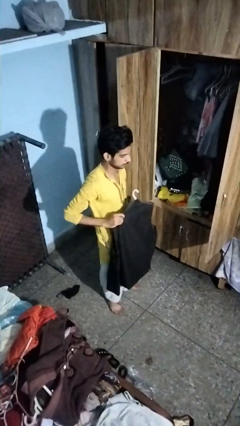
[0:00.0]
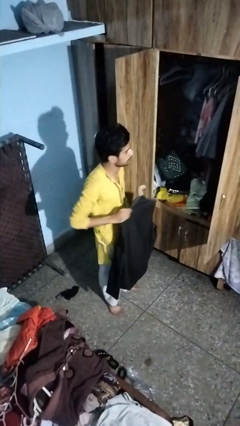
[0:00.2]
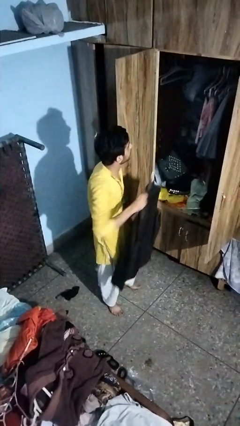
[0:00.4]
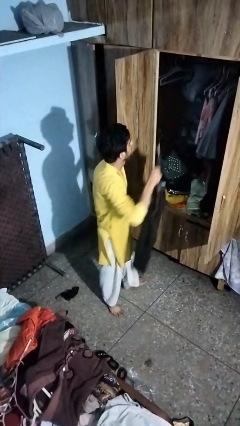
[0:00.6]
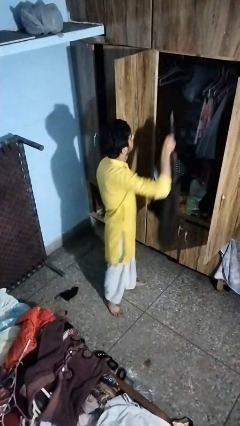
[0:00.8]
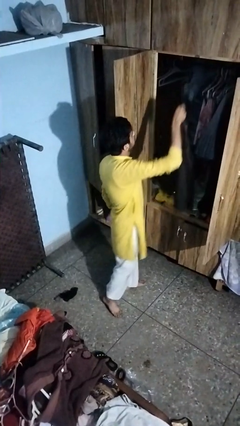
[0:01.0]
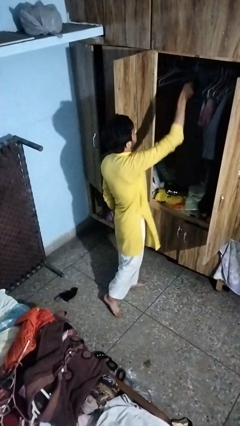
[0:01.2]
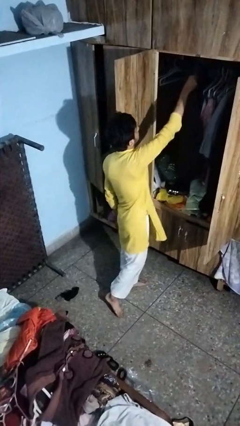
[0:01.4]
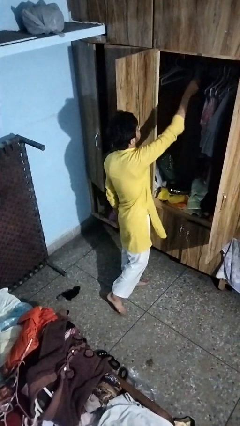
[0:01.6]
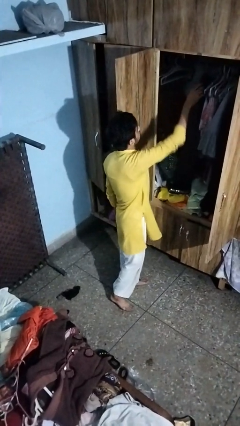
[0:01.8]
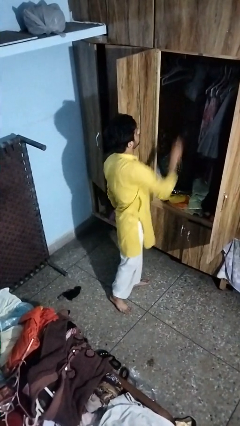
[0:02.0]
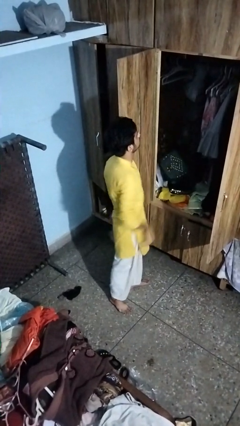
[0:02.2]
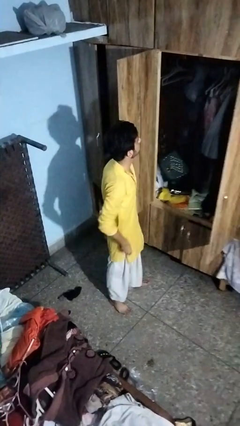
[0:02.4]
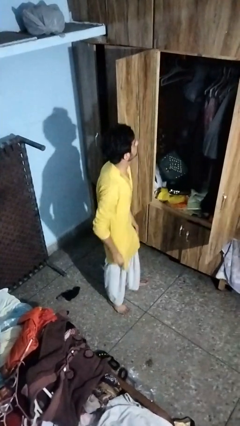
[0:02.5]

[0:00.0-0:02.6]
person puts clothes into closet

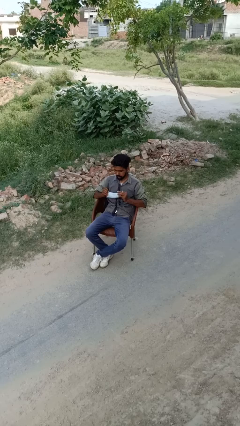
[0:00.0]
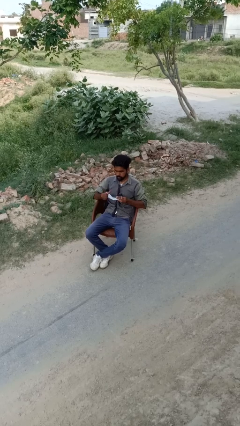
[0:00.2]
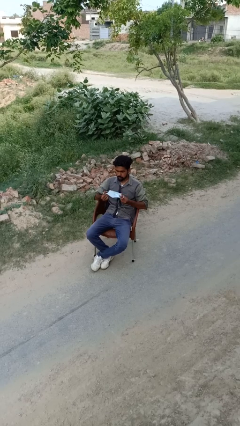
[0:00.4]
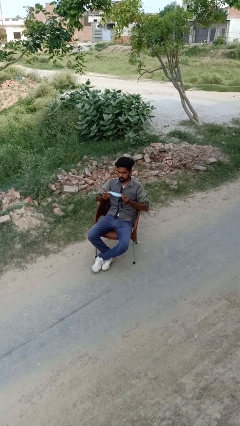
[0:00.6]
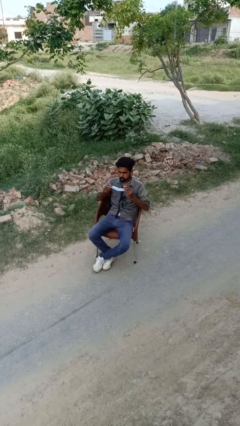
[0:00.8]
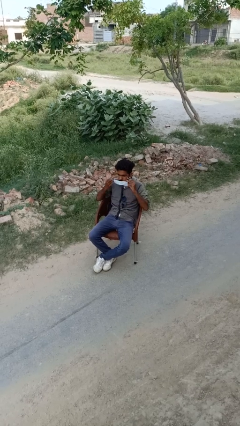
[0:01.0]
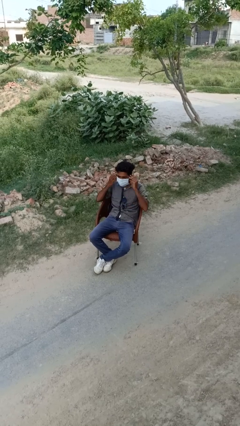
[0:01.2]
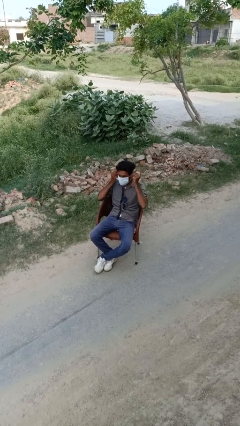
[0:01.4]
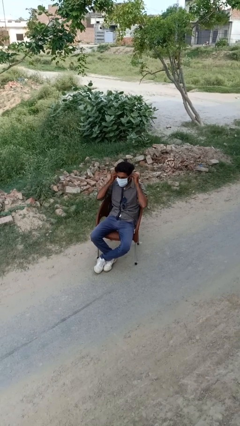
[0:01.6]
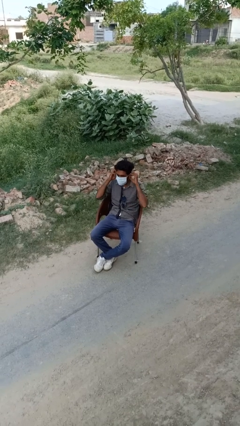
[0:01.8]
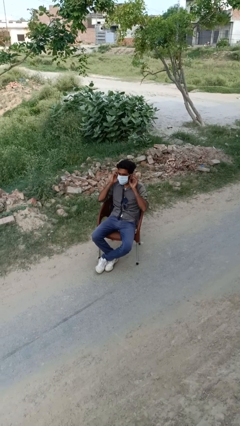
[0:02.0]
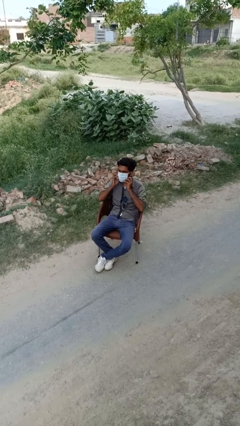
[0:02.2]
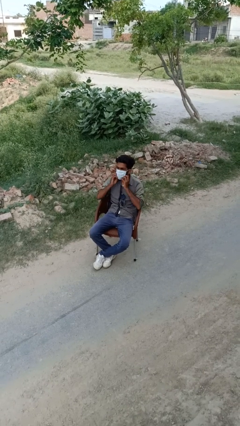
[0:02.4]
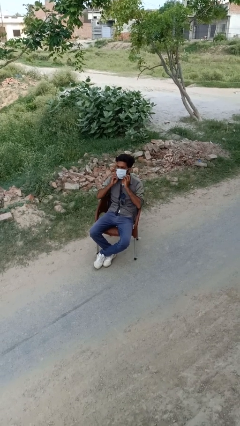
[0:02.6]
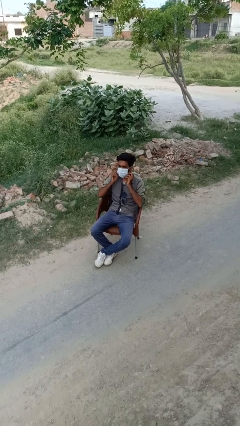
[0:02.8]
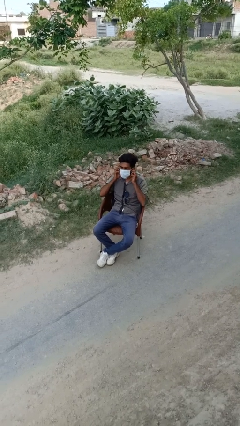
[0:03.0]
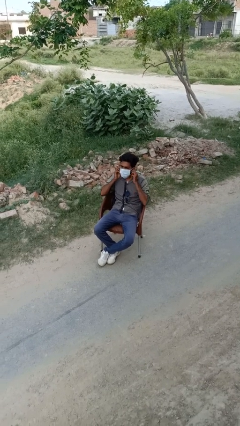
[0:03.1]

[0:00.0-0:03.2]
person puts on facemask

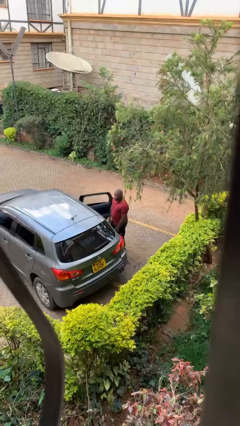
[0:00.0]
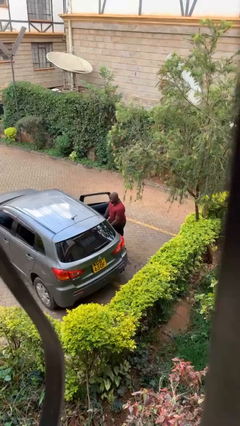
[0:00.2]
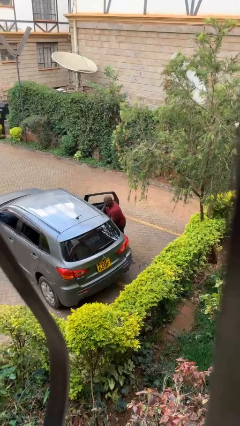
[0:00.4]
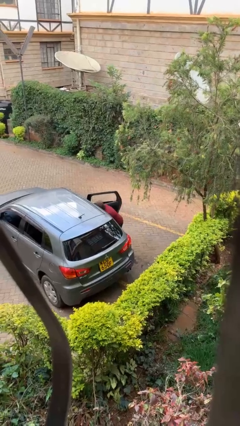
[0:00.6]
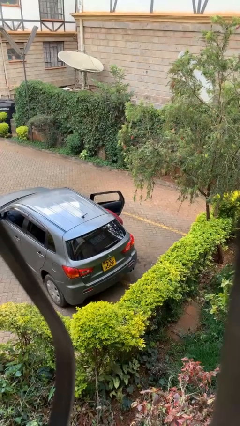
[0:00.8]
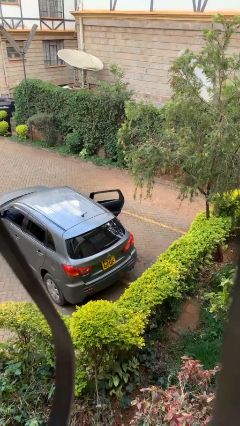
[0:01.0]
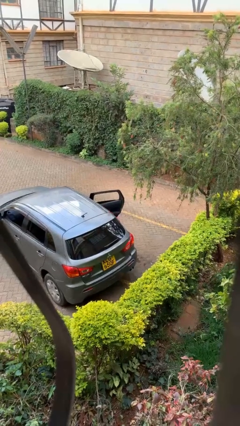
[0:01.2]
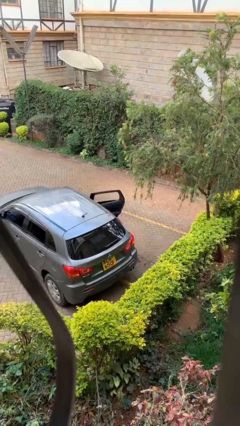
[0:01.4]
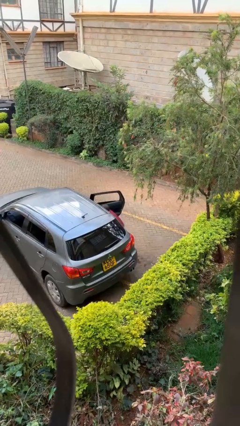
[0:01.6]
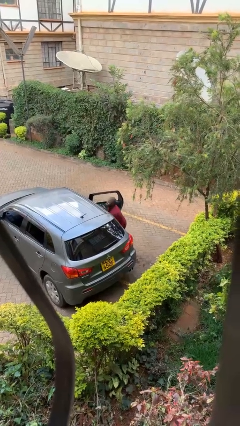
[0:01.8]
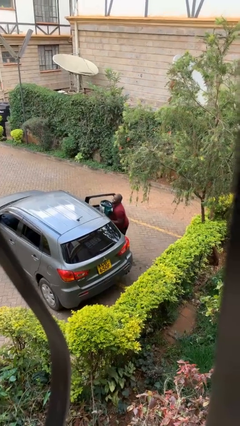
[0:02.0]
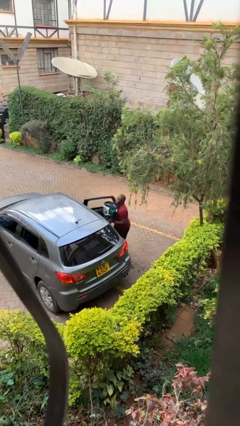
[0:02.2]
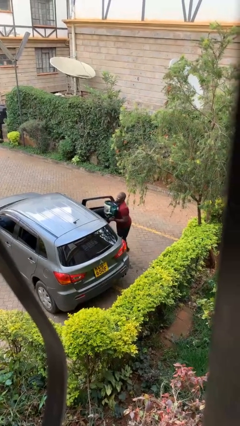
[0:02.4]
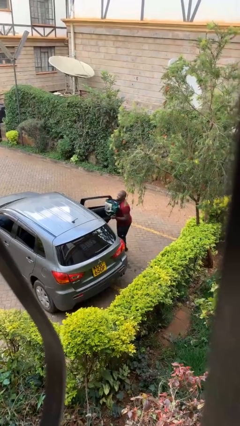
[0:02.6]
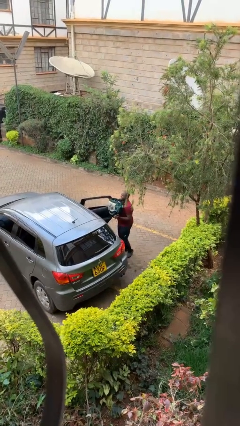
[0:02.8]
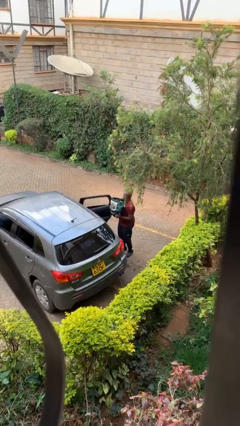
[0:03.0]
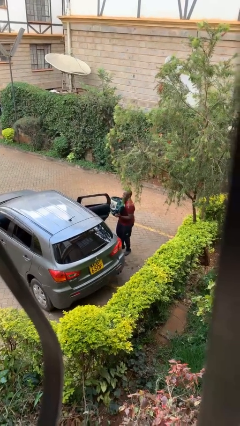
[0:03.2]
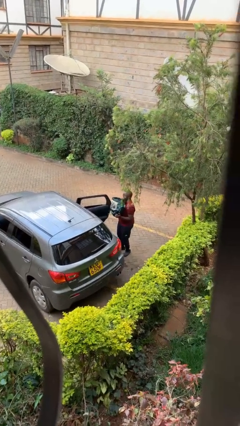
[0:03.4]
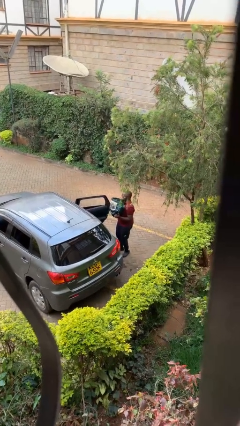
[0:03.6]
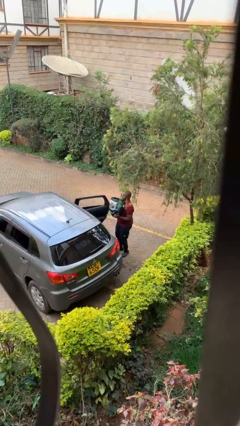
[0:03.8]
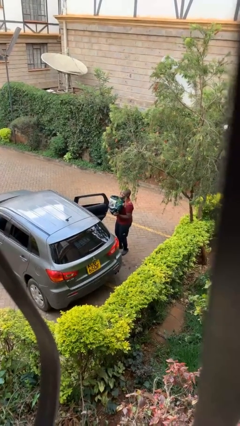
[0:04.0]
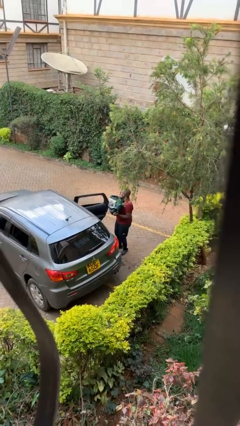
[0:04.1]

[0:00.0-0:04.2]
person unloads car

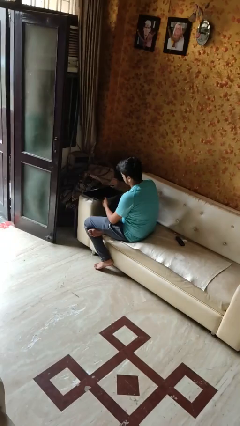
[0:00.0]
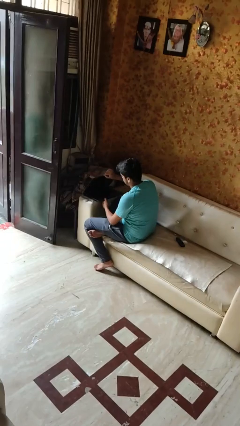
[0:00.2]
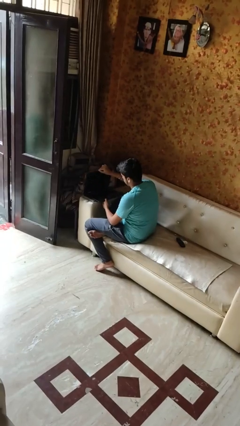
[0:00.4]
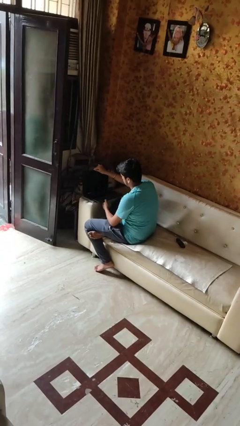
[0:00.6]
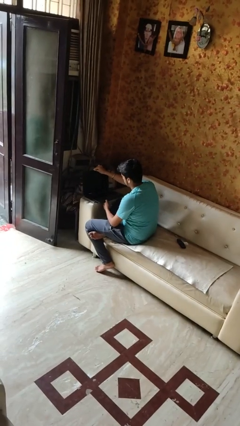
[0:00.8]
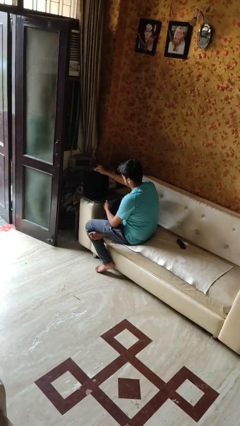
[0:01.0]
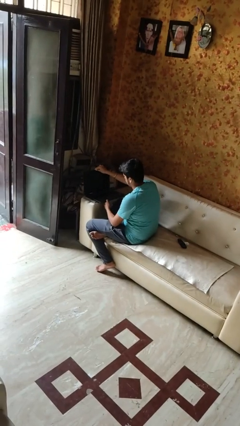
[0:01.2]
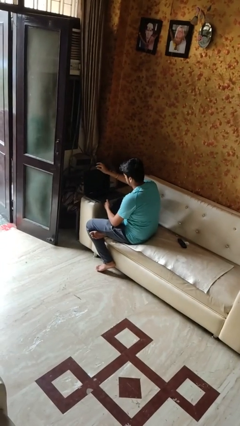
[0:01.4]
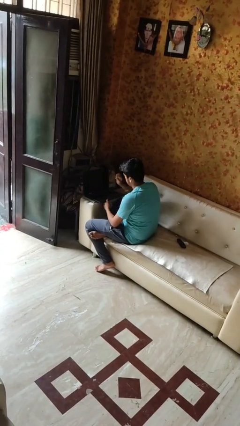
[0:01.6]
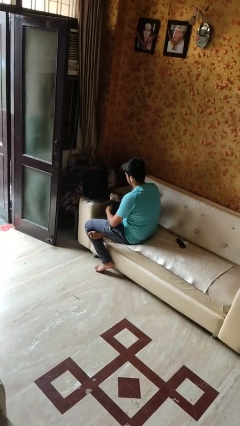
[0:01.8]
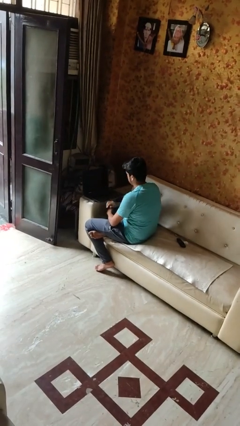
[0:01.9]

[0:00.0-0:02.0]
person opens laptop

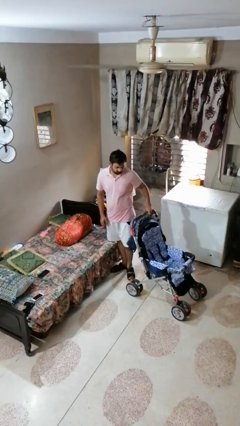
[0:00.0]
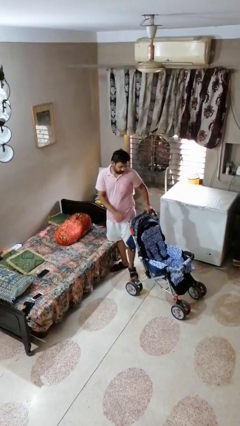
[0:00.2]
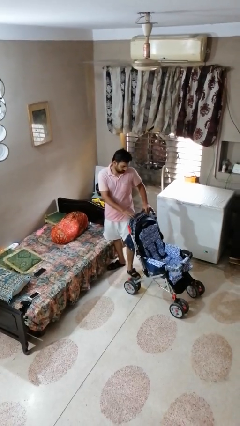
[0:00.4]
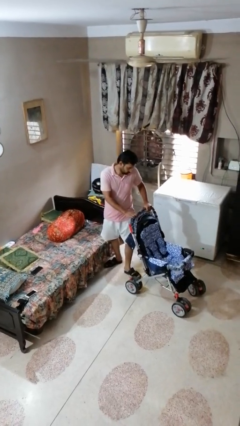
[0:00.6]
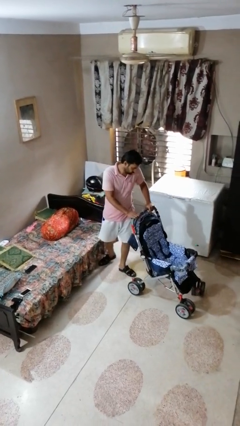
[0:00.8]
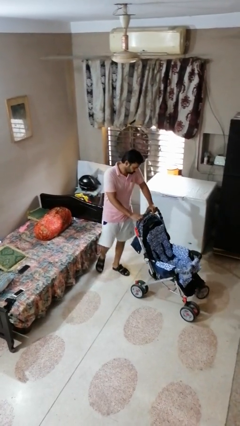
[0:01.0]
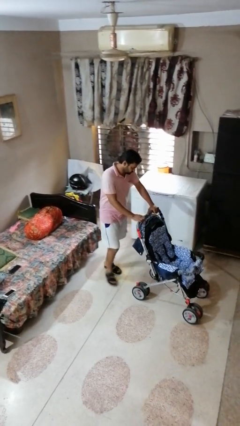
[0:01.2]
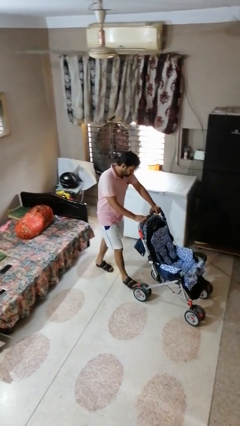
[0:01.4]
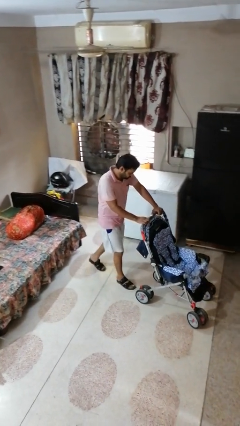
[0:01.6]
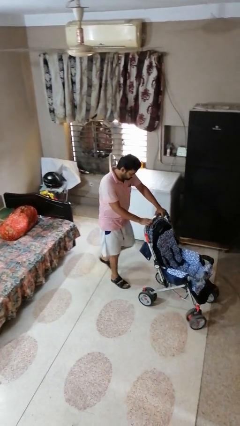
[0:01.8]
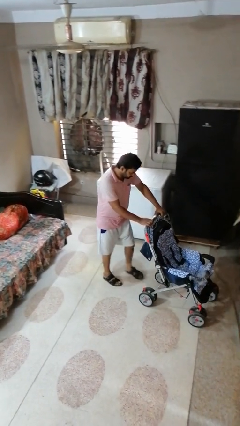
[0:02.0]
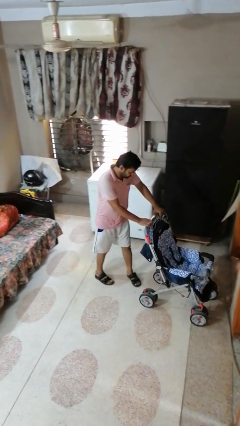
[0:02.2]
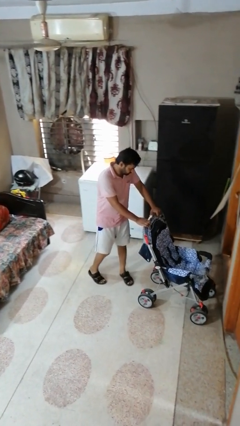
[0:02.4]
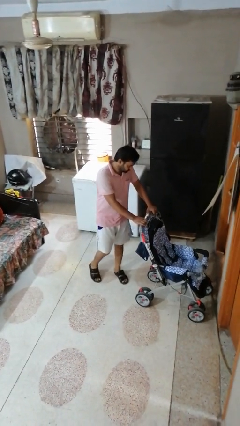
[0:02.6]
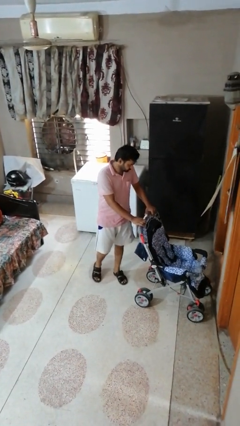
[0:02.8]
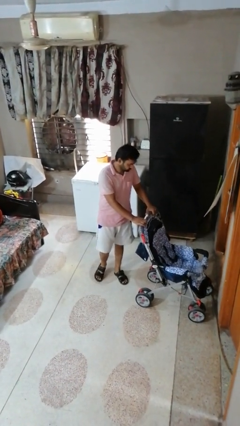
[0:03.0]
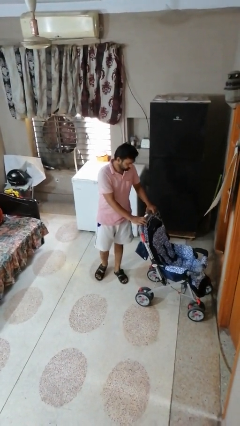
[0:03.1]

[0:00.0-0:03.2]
person pushes wheeled cart

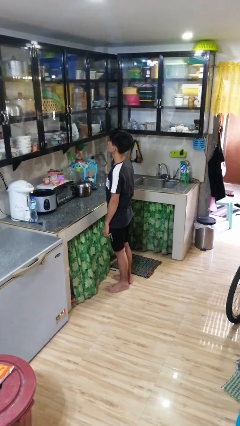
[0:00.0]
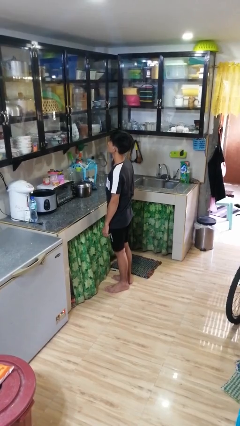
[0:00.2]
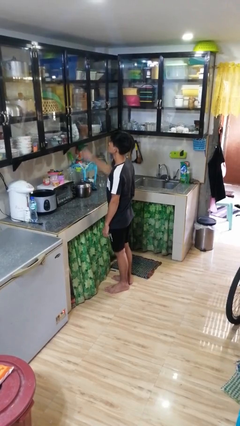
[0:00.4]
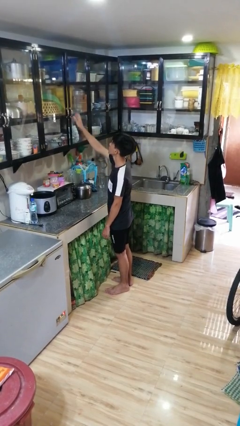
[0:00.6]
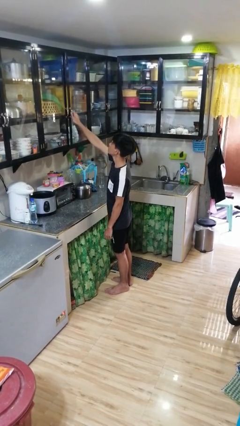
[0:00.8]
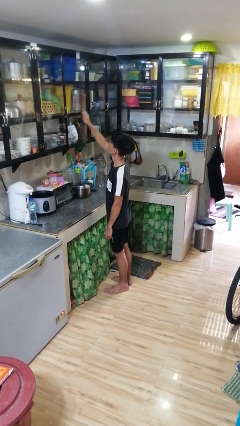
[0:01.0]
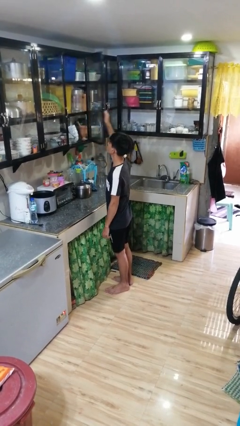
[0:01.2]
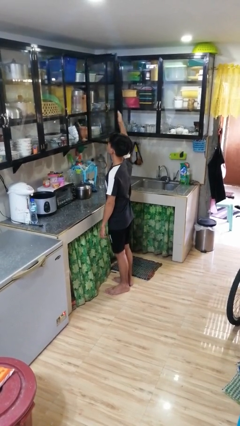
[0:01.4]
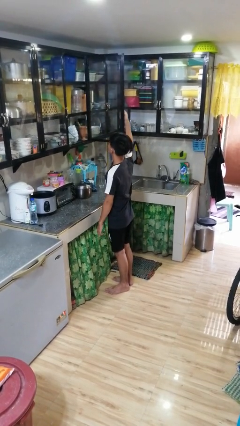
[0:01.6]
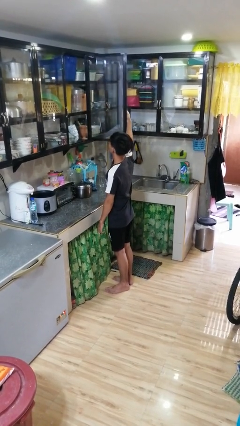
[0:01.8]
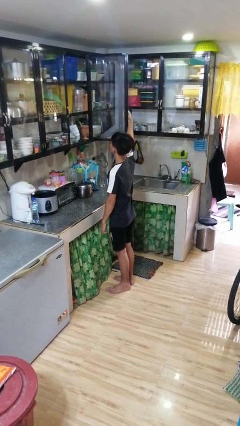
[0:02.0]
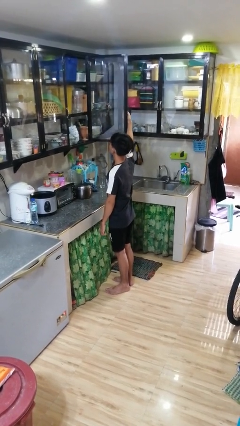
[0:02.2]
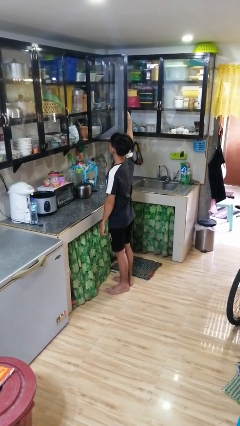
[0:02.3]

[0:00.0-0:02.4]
person opens cabinet
